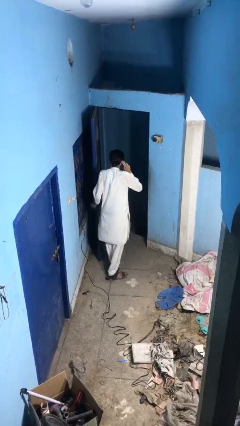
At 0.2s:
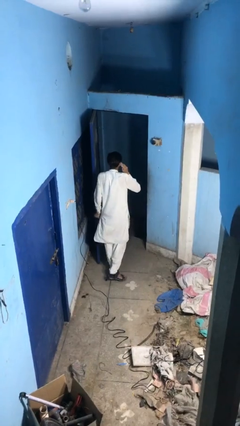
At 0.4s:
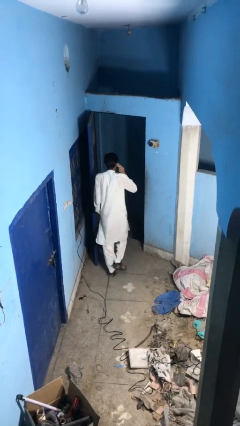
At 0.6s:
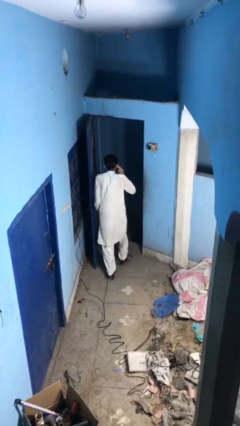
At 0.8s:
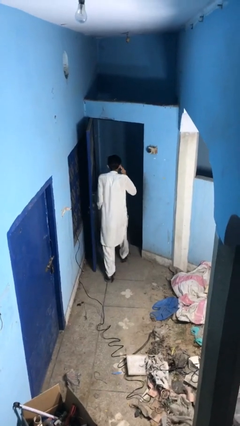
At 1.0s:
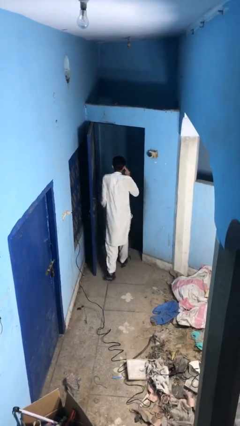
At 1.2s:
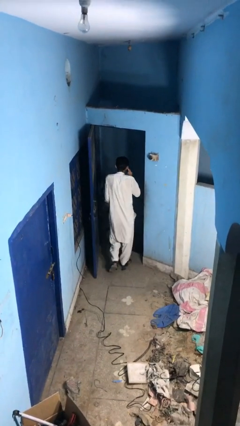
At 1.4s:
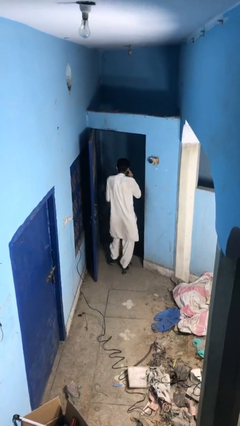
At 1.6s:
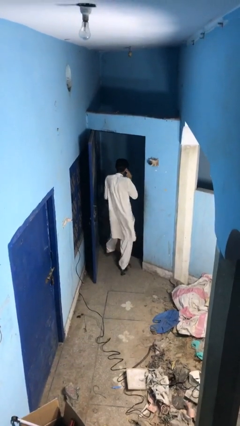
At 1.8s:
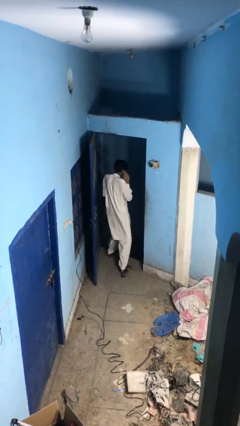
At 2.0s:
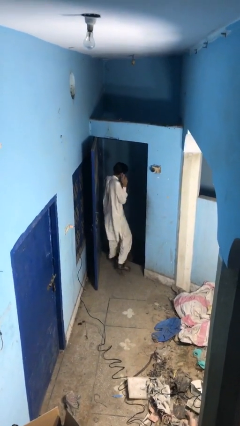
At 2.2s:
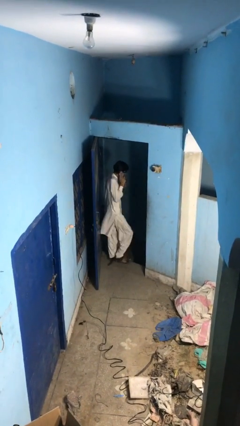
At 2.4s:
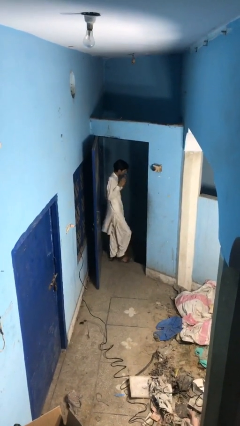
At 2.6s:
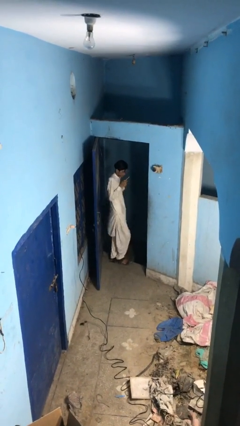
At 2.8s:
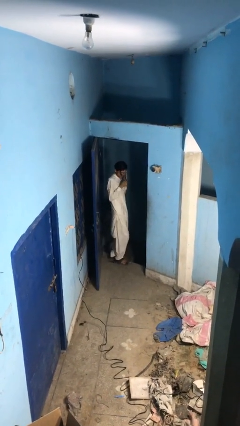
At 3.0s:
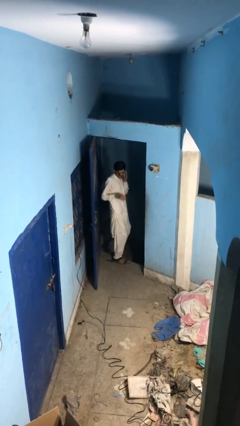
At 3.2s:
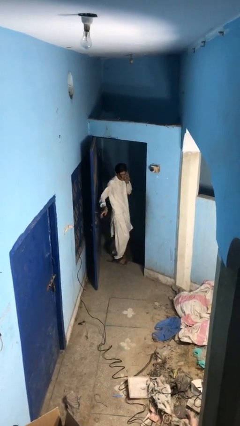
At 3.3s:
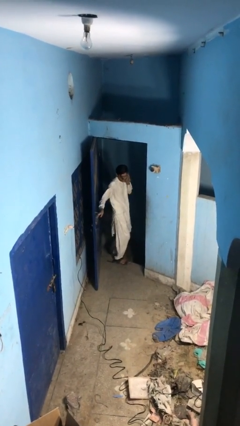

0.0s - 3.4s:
person exits scene through structure

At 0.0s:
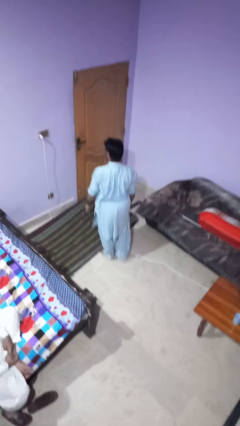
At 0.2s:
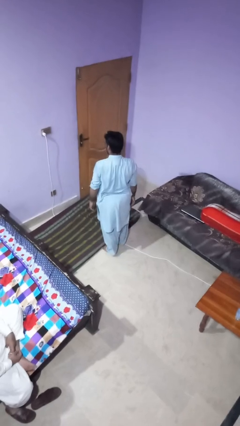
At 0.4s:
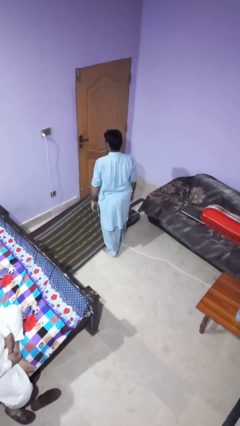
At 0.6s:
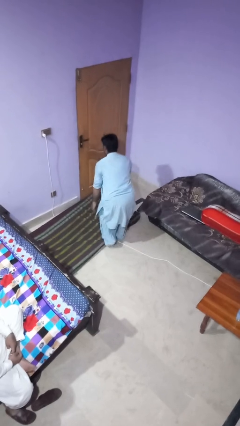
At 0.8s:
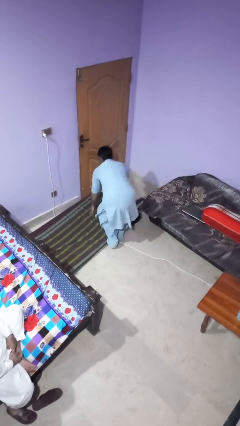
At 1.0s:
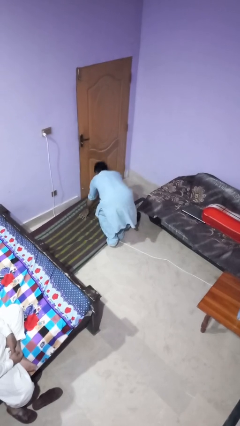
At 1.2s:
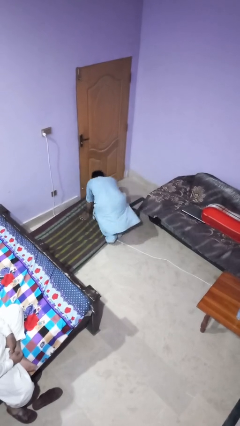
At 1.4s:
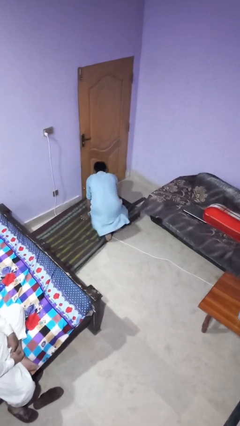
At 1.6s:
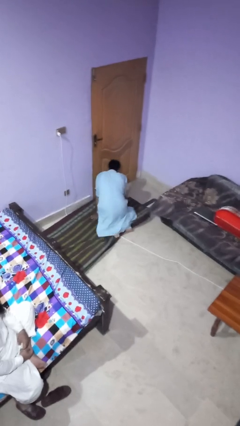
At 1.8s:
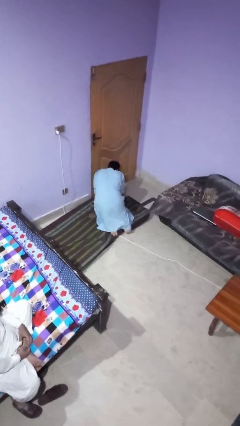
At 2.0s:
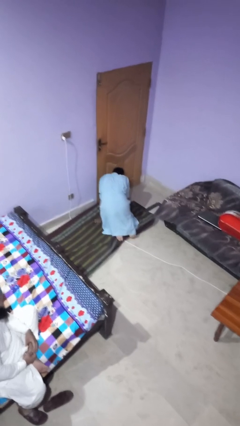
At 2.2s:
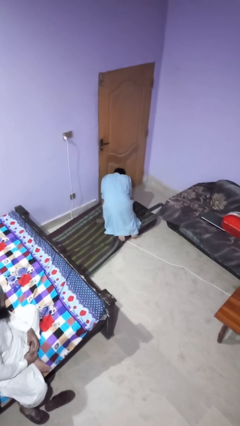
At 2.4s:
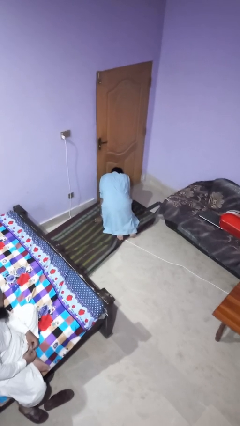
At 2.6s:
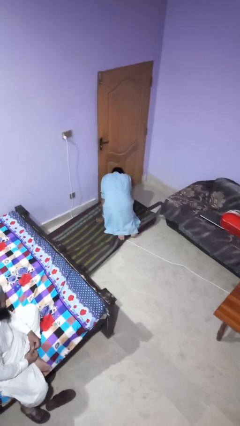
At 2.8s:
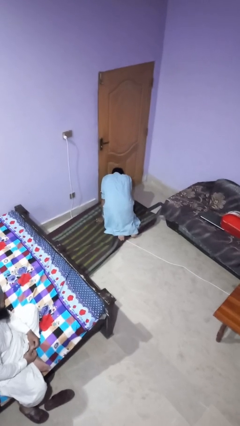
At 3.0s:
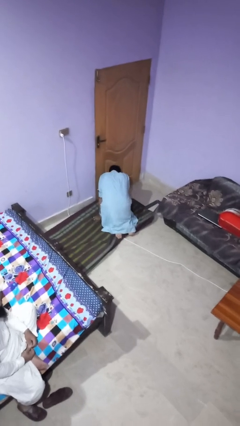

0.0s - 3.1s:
person trips on object on floor

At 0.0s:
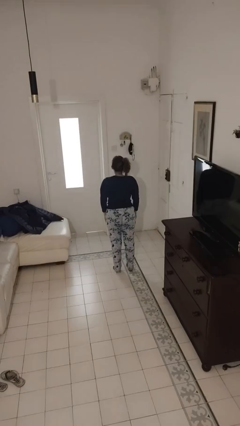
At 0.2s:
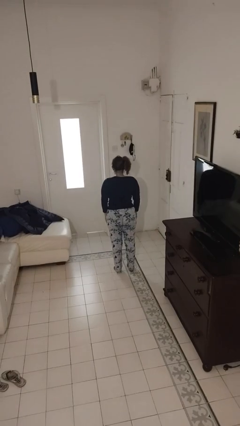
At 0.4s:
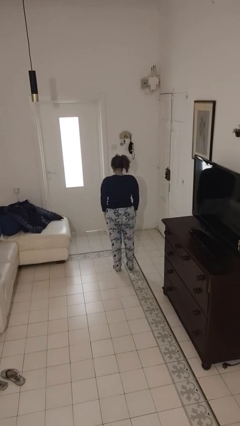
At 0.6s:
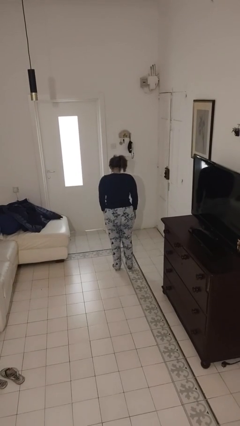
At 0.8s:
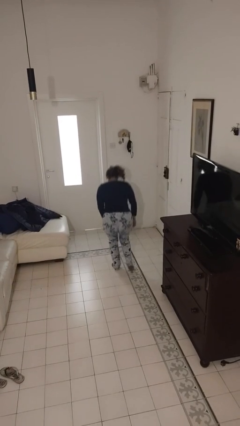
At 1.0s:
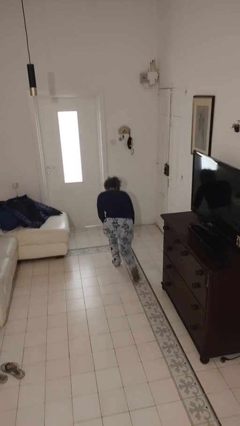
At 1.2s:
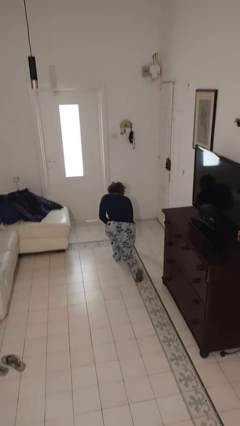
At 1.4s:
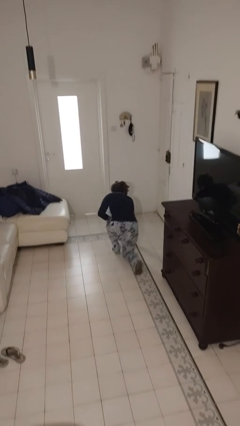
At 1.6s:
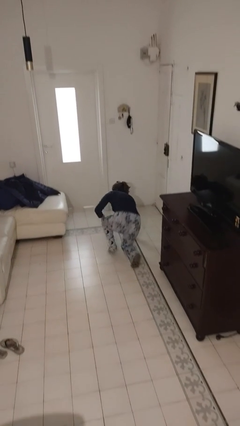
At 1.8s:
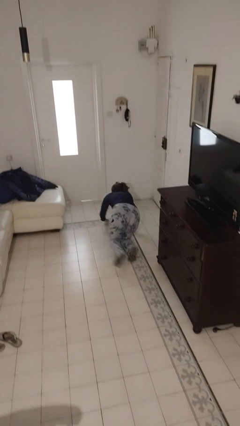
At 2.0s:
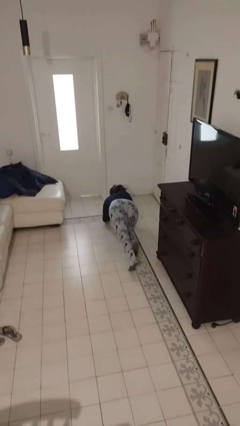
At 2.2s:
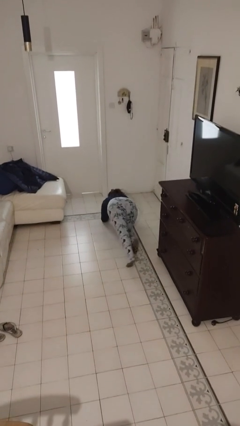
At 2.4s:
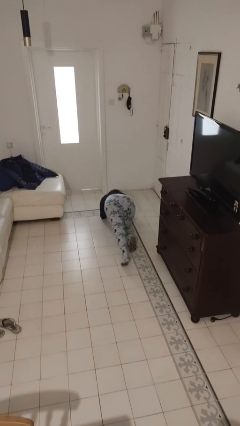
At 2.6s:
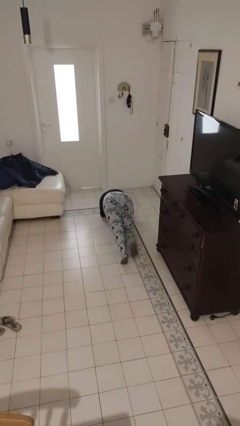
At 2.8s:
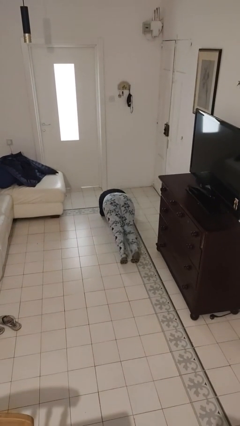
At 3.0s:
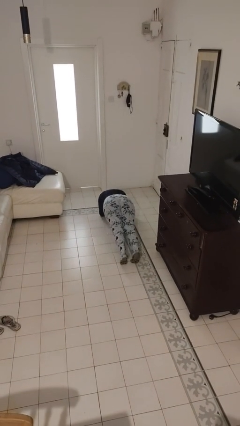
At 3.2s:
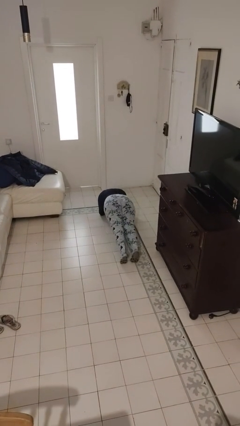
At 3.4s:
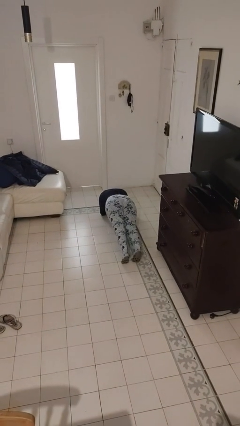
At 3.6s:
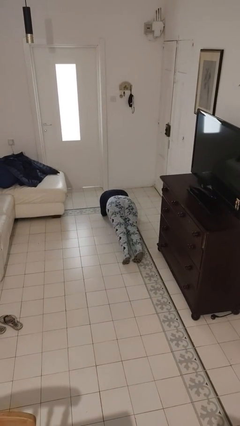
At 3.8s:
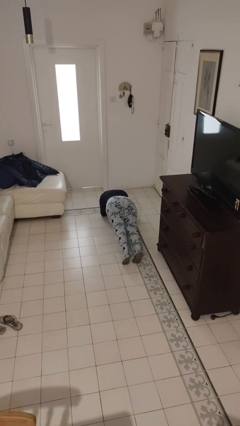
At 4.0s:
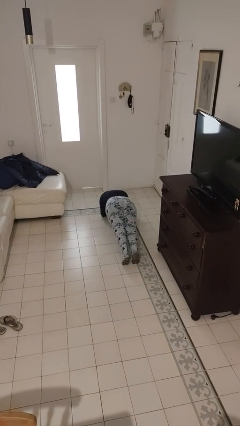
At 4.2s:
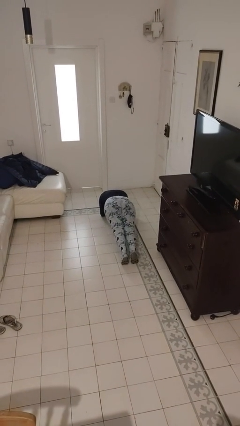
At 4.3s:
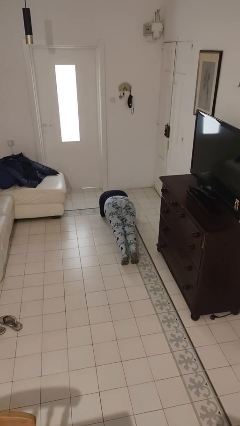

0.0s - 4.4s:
person exercises with plank

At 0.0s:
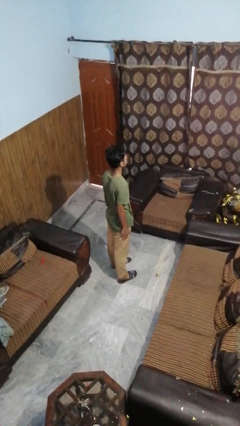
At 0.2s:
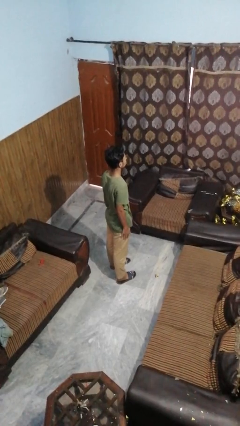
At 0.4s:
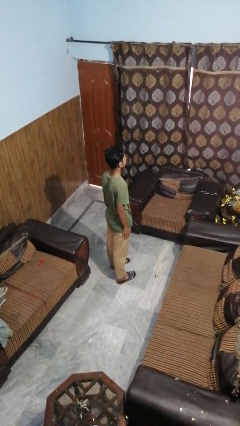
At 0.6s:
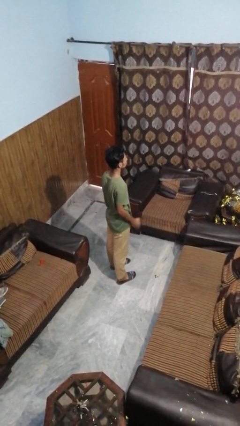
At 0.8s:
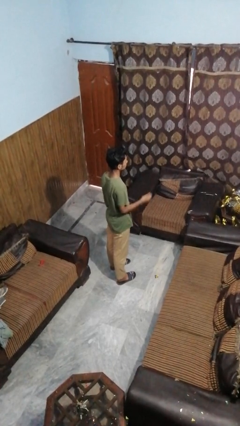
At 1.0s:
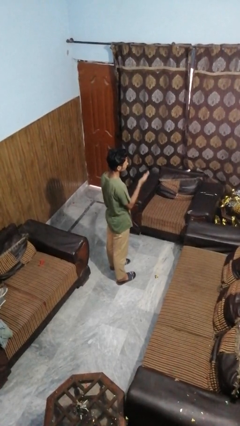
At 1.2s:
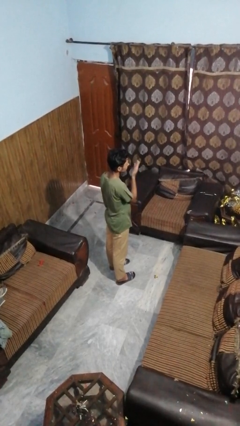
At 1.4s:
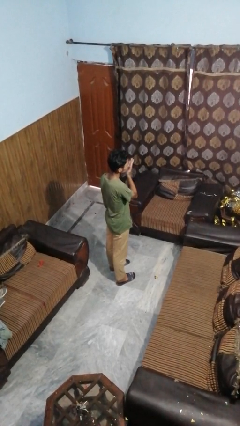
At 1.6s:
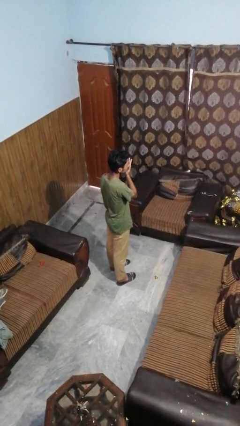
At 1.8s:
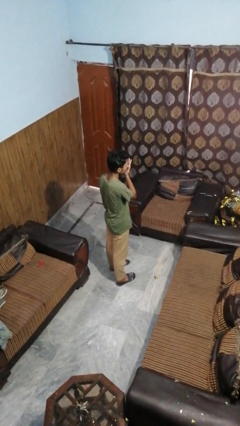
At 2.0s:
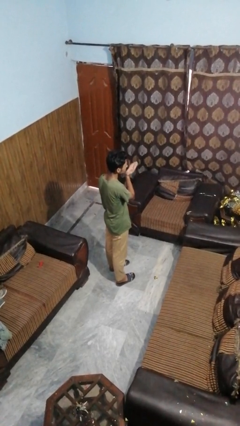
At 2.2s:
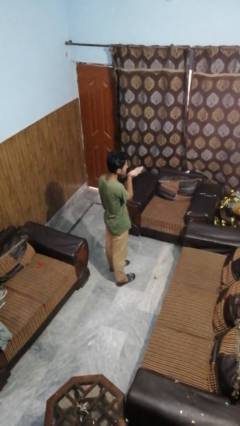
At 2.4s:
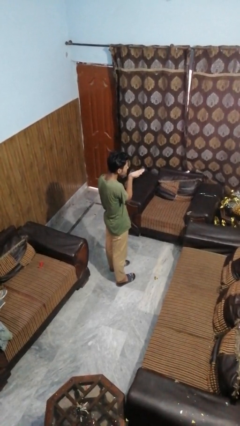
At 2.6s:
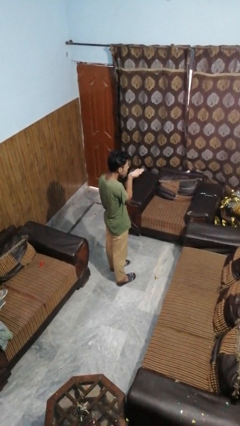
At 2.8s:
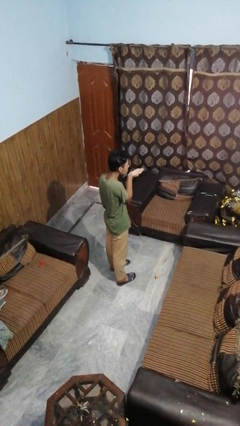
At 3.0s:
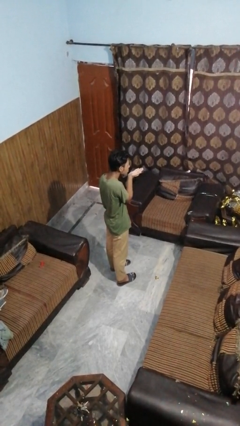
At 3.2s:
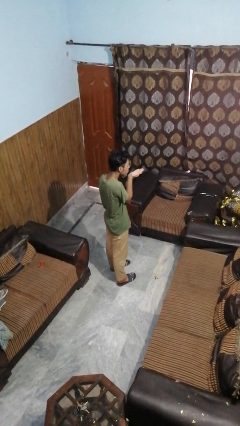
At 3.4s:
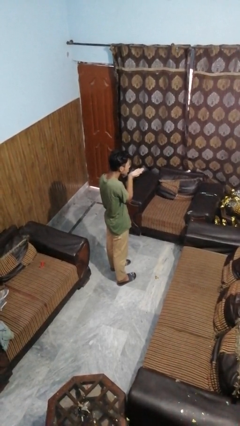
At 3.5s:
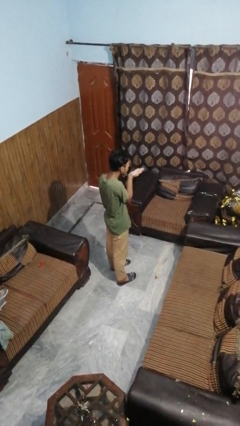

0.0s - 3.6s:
person gestures blow kiss

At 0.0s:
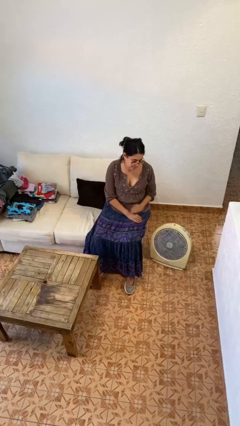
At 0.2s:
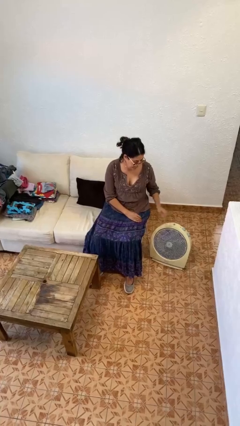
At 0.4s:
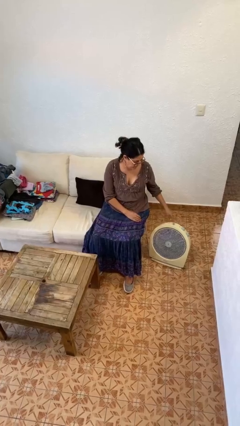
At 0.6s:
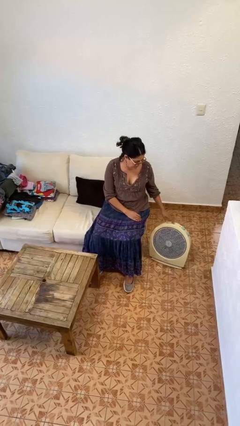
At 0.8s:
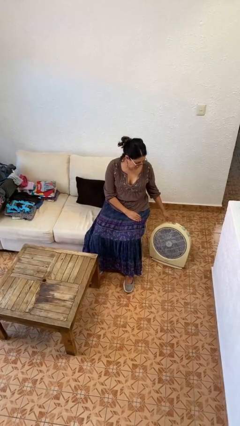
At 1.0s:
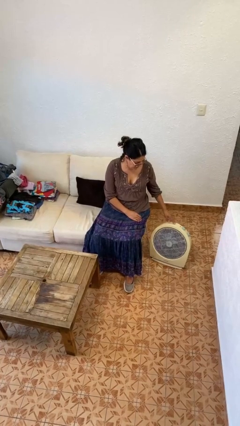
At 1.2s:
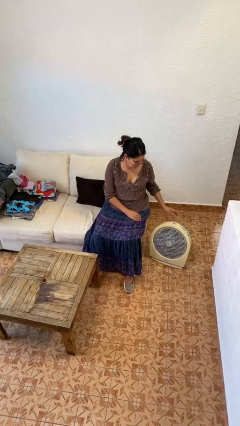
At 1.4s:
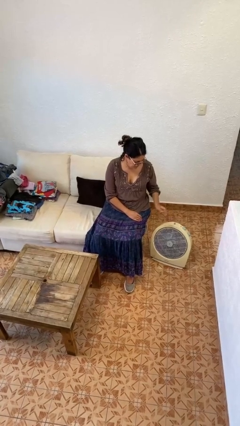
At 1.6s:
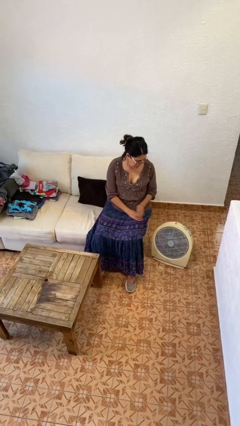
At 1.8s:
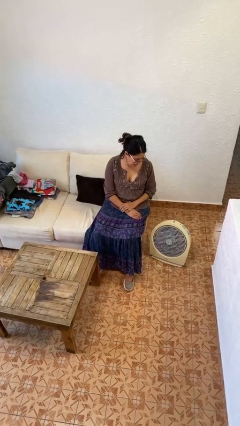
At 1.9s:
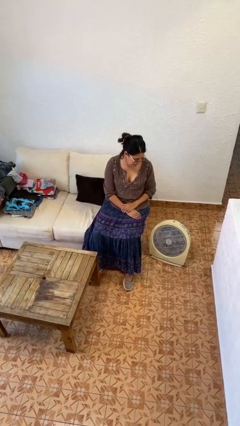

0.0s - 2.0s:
person turns off fan

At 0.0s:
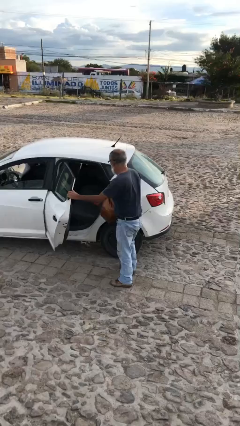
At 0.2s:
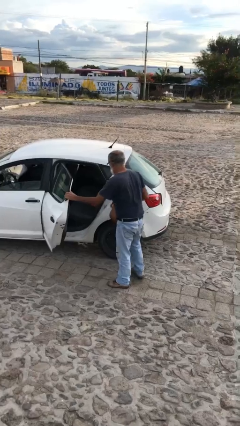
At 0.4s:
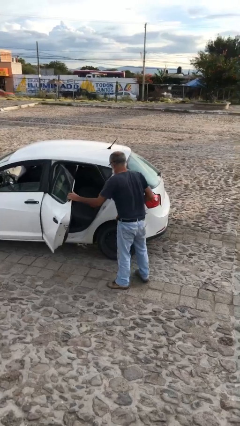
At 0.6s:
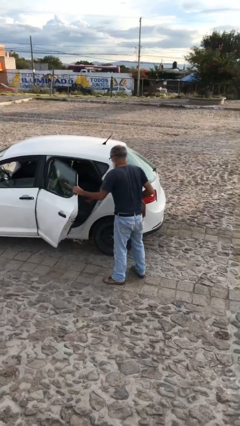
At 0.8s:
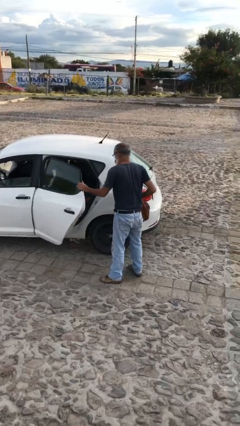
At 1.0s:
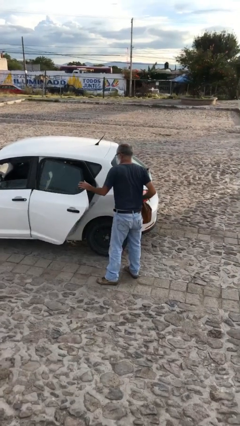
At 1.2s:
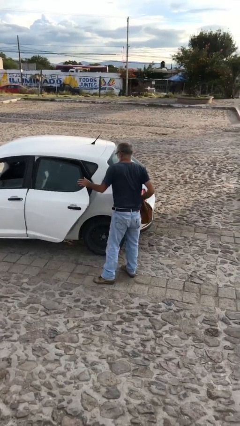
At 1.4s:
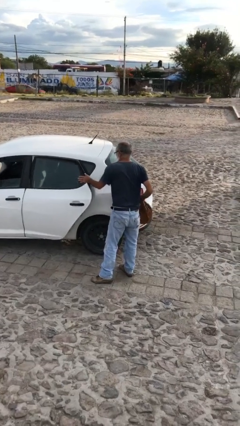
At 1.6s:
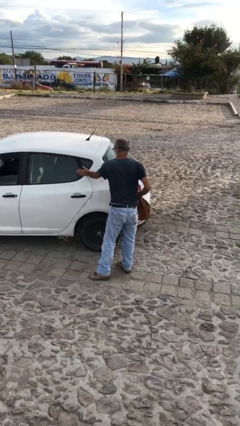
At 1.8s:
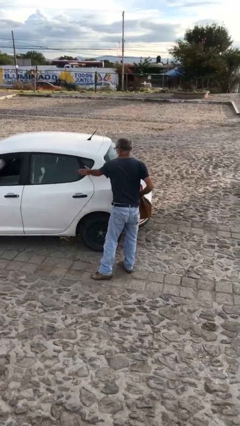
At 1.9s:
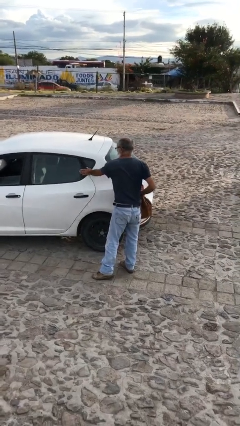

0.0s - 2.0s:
person closes car door
